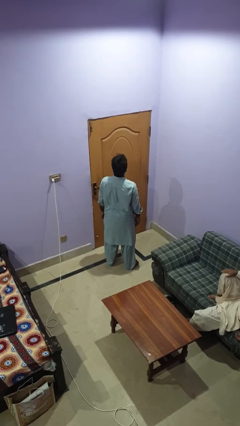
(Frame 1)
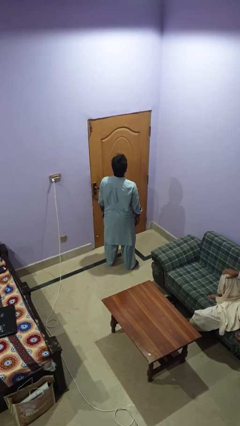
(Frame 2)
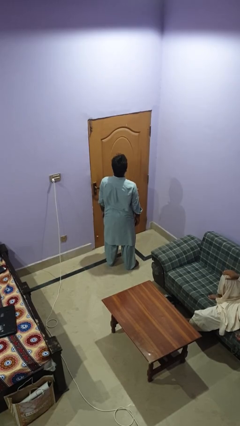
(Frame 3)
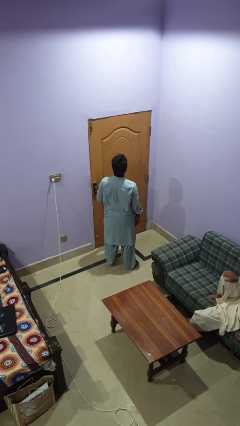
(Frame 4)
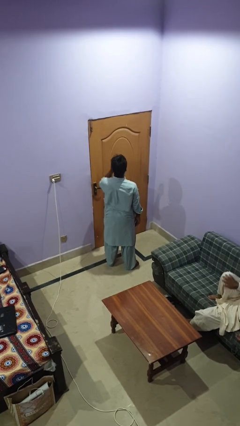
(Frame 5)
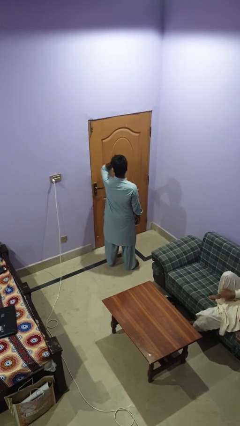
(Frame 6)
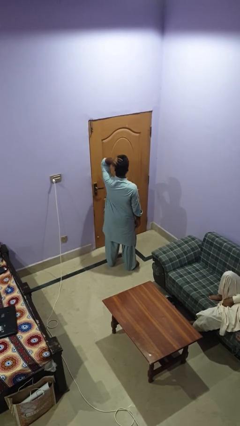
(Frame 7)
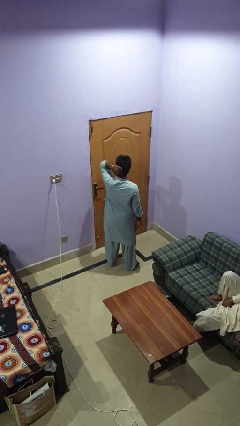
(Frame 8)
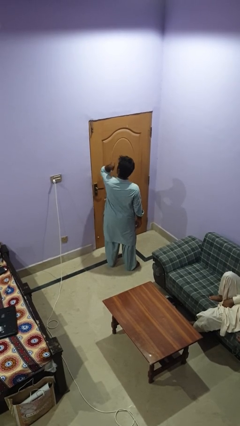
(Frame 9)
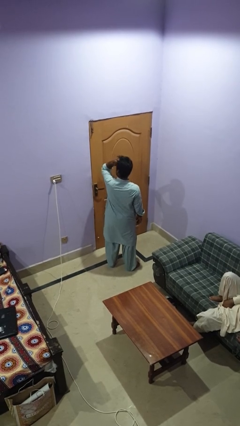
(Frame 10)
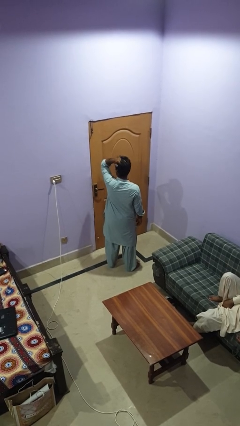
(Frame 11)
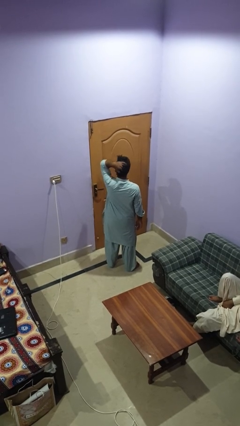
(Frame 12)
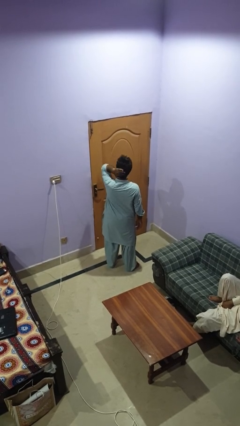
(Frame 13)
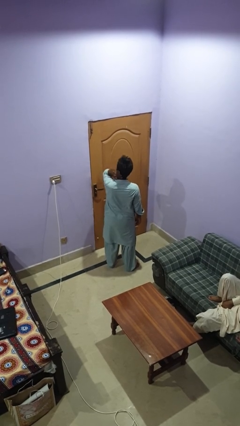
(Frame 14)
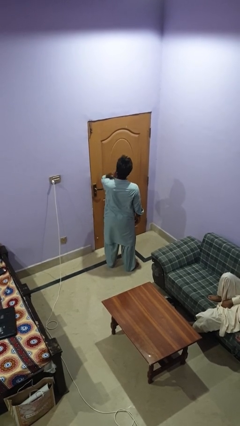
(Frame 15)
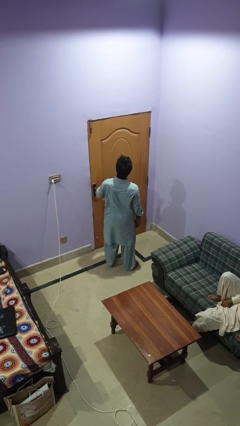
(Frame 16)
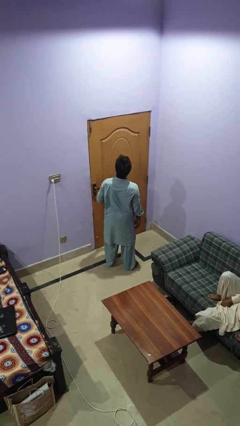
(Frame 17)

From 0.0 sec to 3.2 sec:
person strokes hair

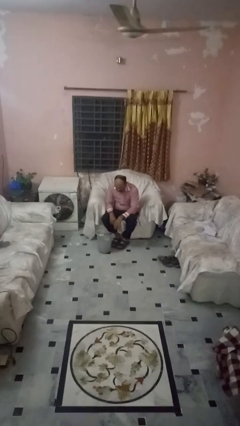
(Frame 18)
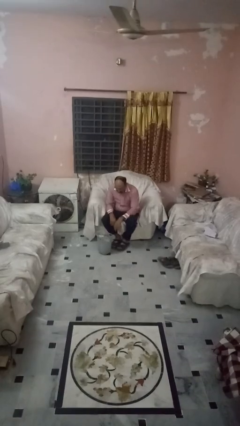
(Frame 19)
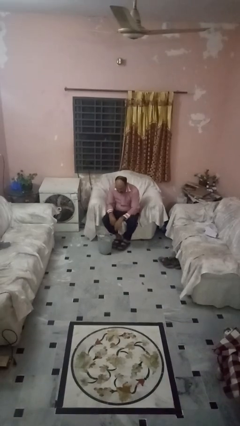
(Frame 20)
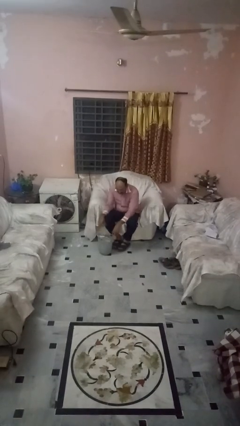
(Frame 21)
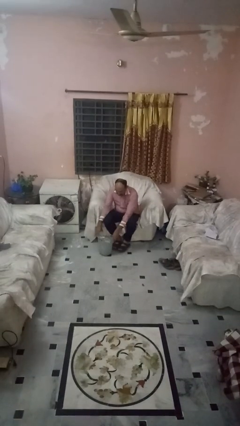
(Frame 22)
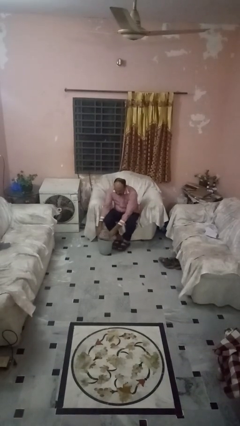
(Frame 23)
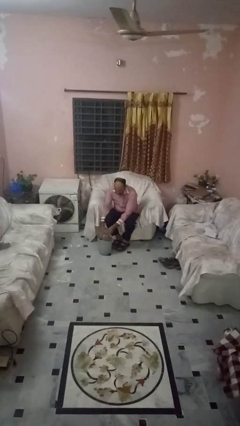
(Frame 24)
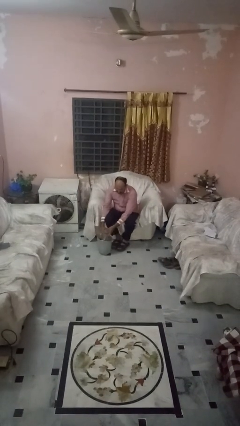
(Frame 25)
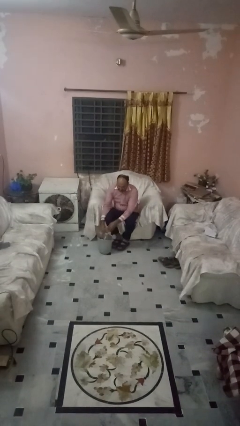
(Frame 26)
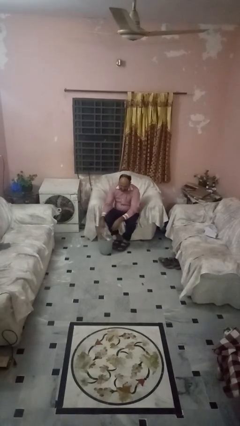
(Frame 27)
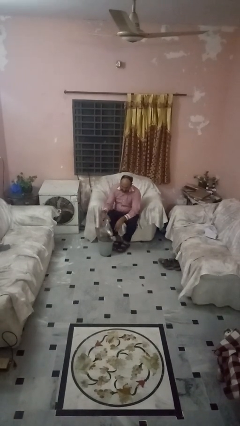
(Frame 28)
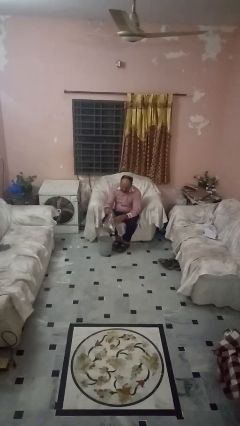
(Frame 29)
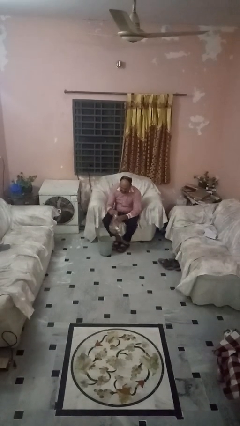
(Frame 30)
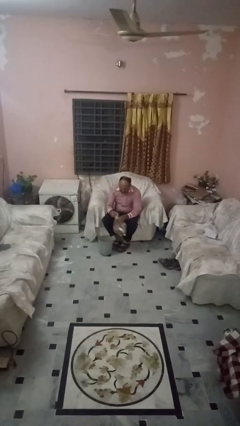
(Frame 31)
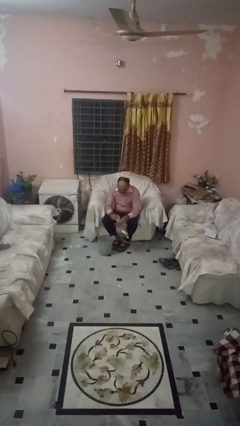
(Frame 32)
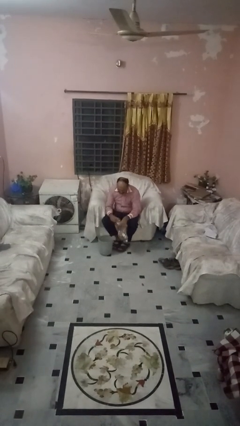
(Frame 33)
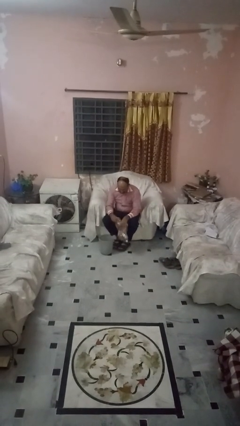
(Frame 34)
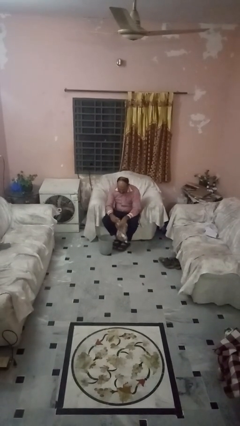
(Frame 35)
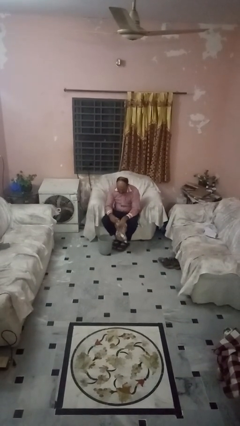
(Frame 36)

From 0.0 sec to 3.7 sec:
person removes trashbag from trashcan

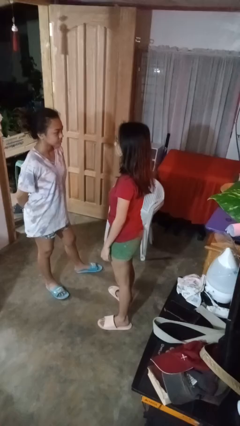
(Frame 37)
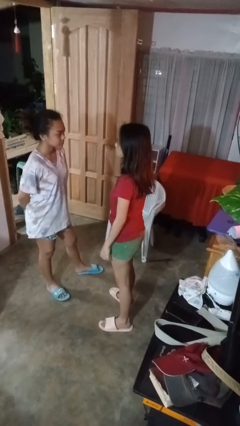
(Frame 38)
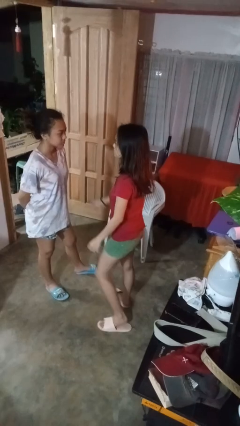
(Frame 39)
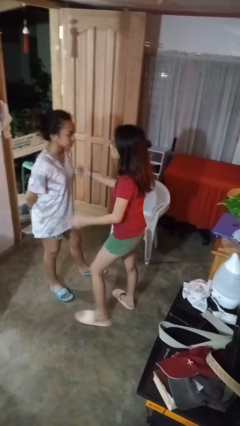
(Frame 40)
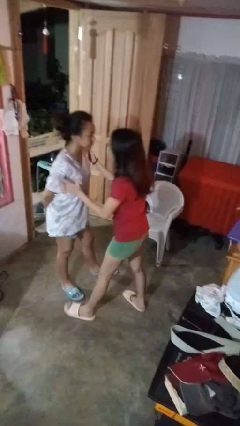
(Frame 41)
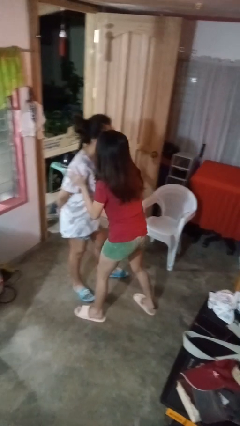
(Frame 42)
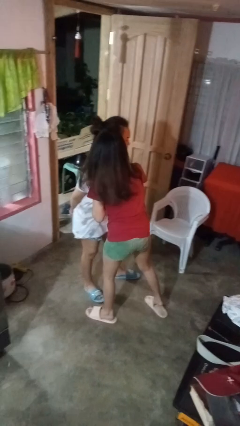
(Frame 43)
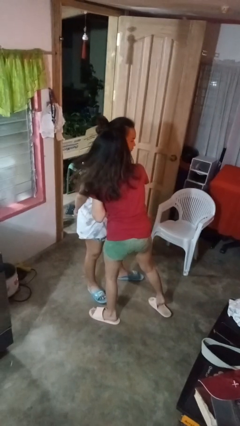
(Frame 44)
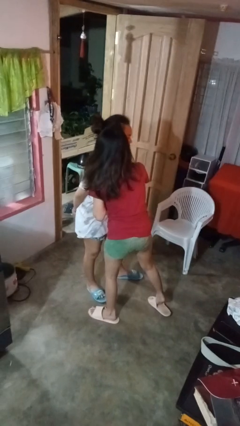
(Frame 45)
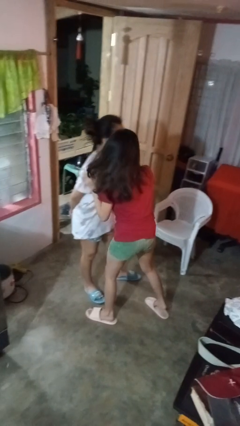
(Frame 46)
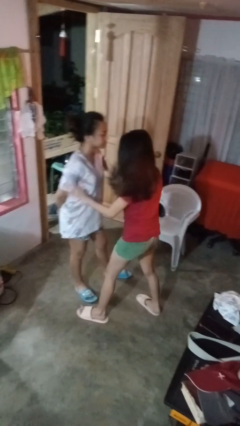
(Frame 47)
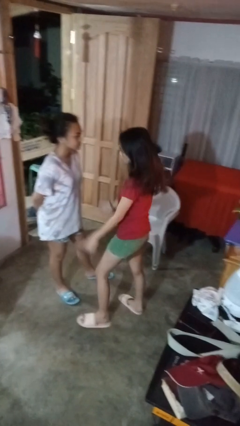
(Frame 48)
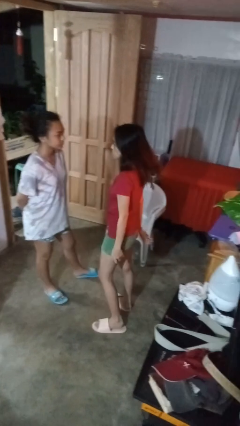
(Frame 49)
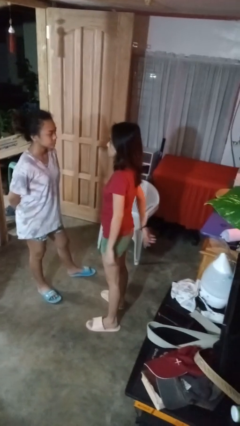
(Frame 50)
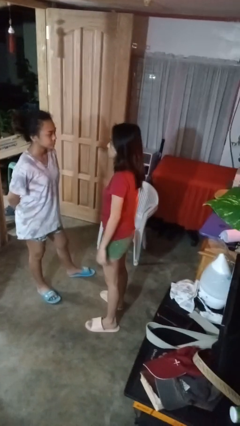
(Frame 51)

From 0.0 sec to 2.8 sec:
person kisses cheek of person

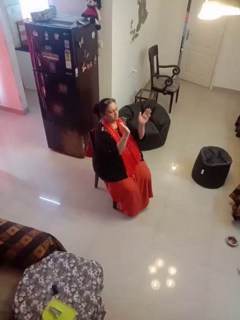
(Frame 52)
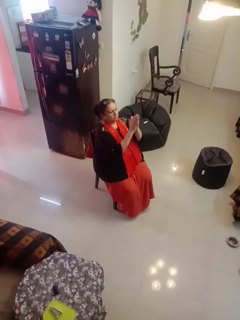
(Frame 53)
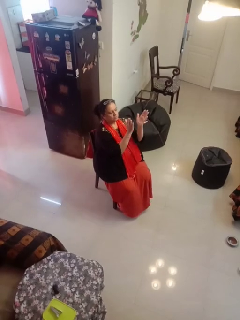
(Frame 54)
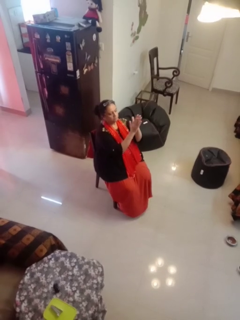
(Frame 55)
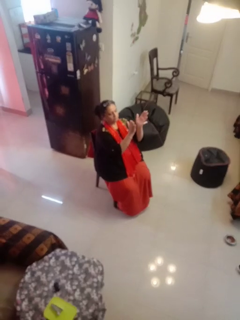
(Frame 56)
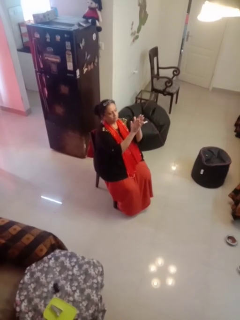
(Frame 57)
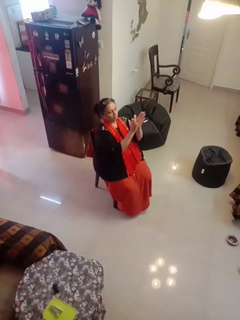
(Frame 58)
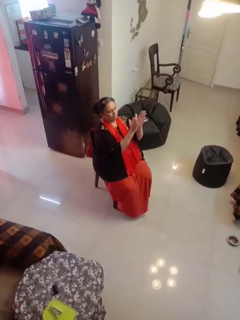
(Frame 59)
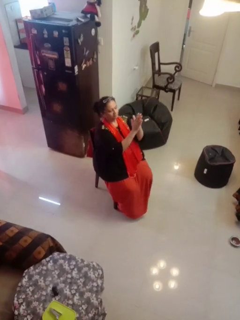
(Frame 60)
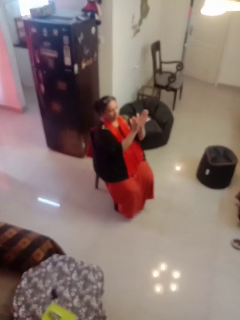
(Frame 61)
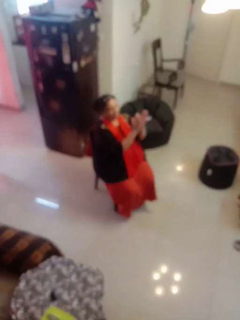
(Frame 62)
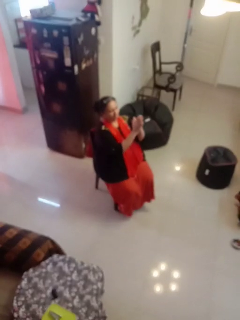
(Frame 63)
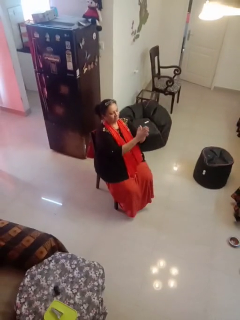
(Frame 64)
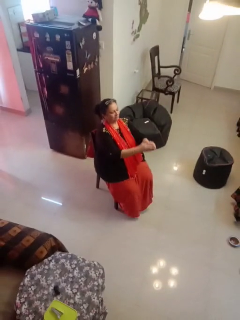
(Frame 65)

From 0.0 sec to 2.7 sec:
person claps hands

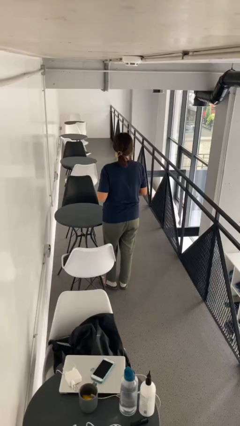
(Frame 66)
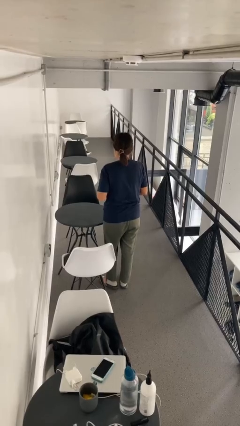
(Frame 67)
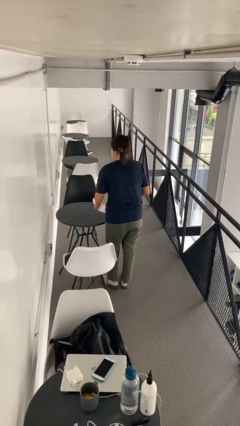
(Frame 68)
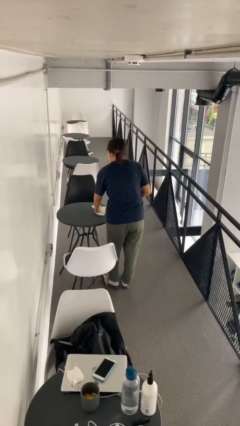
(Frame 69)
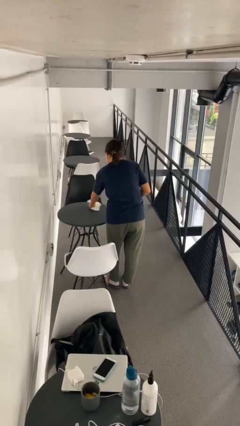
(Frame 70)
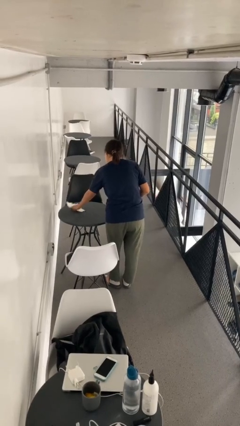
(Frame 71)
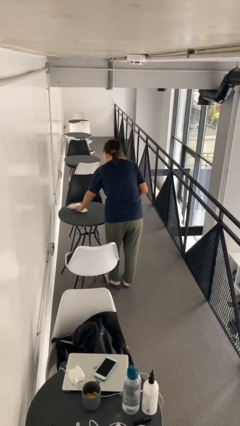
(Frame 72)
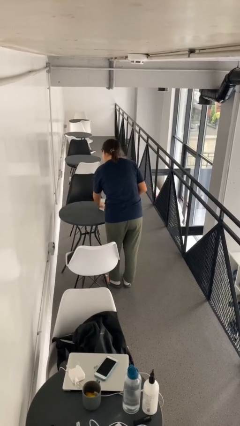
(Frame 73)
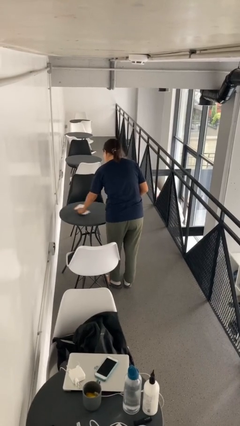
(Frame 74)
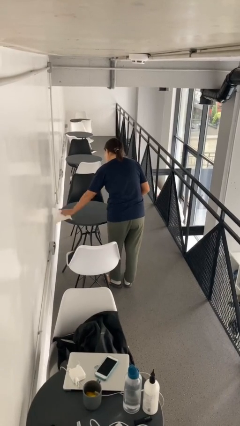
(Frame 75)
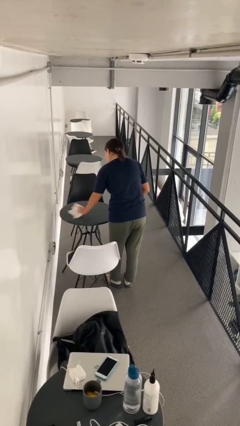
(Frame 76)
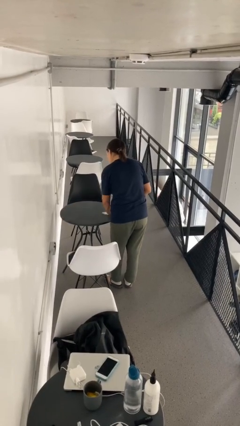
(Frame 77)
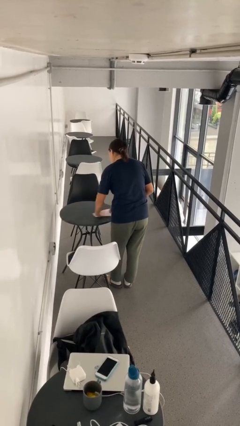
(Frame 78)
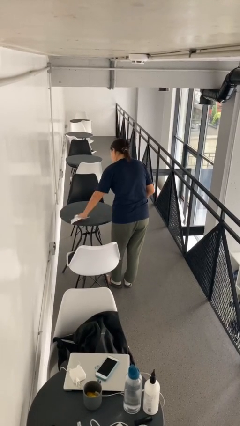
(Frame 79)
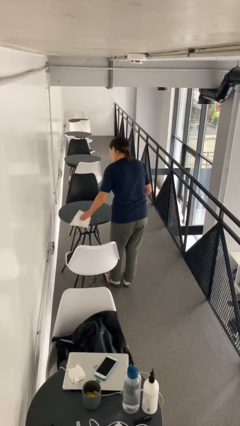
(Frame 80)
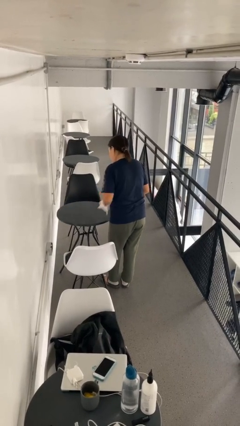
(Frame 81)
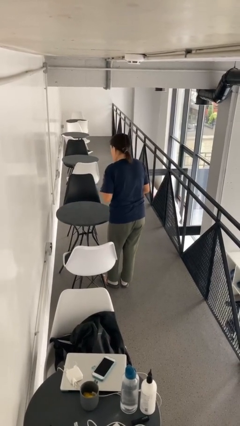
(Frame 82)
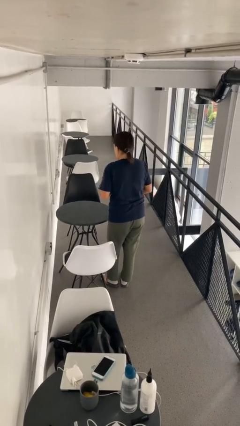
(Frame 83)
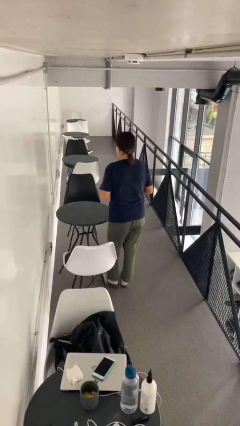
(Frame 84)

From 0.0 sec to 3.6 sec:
person cleans table with rag

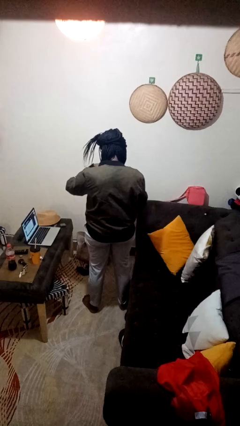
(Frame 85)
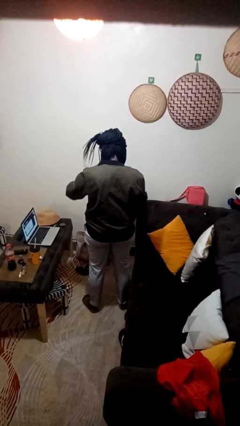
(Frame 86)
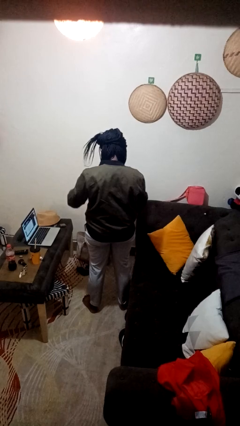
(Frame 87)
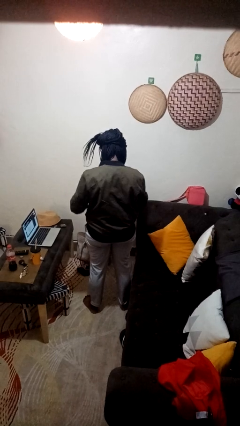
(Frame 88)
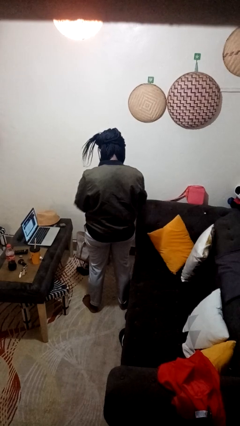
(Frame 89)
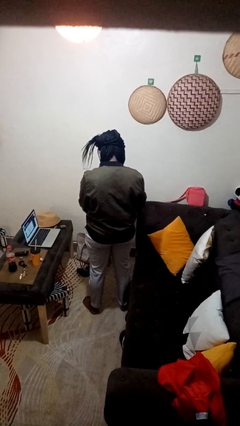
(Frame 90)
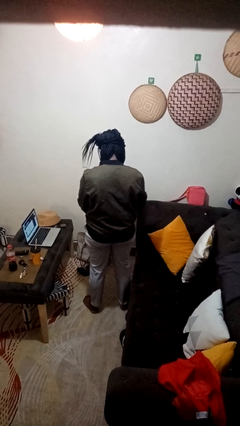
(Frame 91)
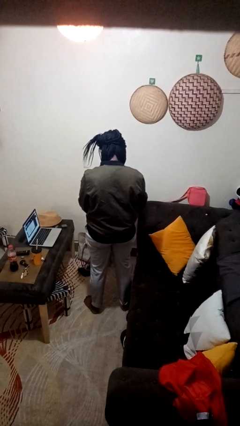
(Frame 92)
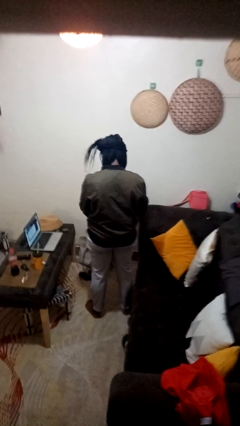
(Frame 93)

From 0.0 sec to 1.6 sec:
person unzips jacket

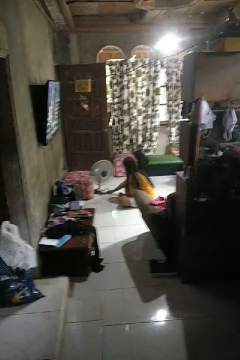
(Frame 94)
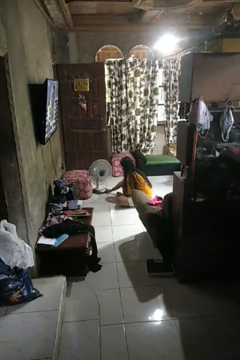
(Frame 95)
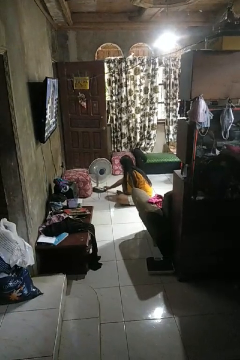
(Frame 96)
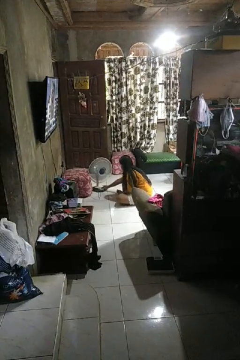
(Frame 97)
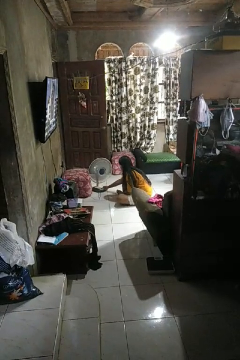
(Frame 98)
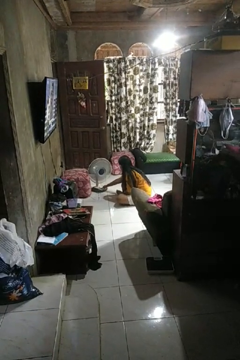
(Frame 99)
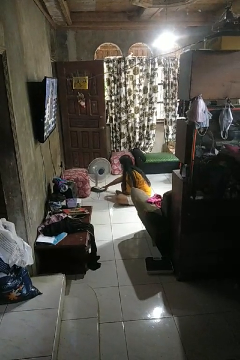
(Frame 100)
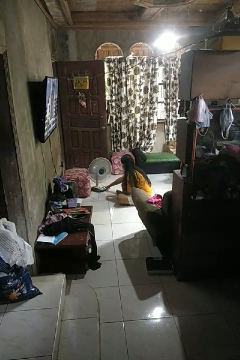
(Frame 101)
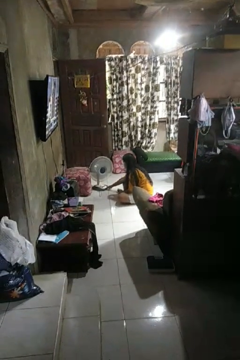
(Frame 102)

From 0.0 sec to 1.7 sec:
person turns off fan
